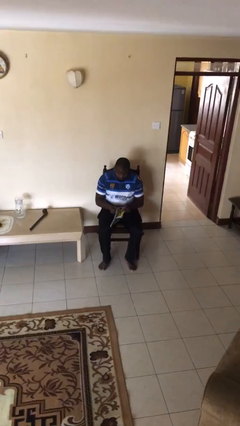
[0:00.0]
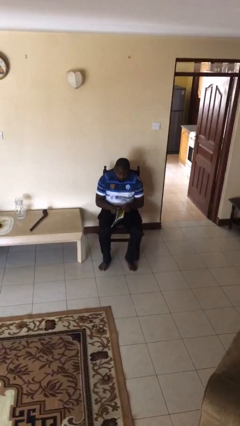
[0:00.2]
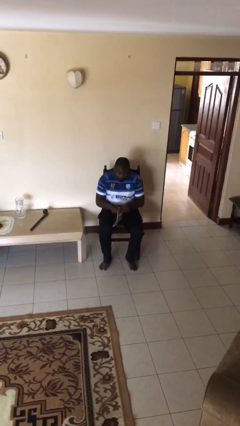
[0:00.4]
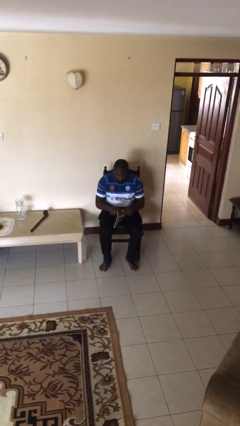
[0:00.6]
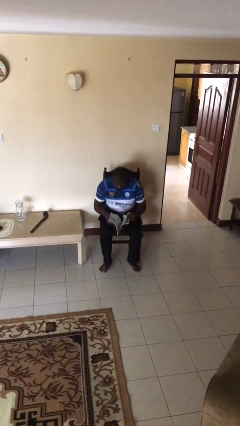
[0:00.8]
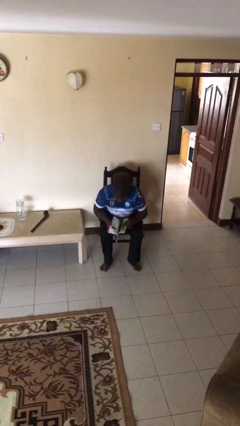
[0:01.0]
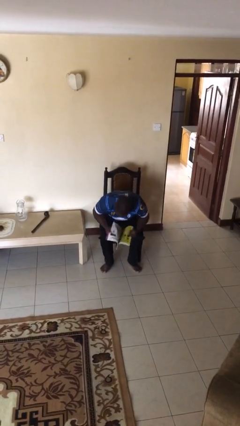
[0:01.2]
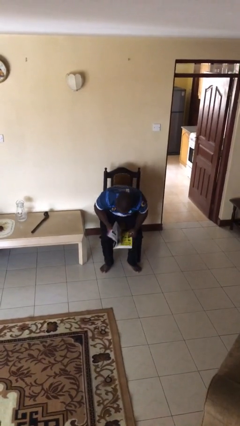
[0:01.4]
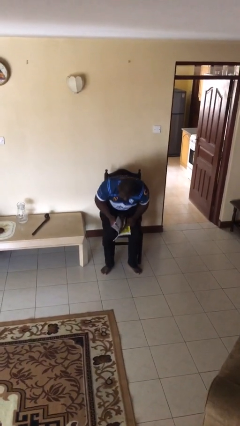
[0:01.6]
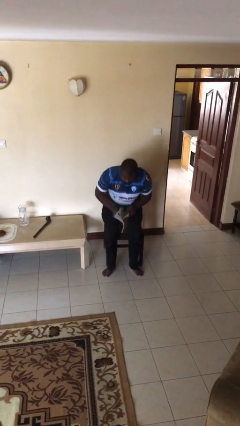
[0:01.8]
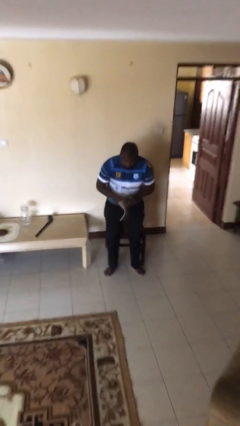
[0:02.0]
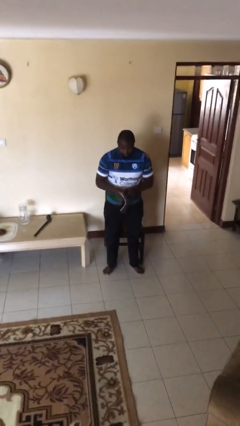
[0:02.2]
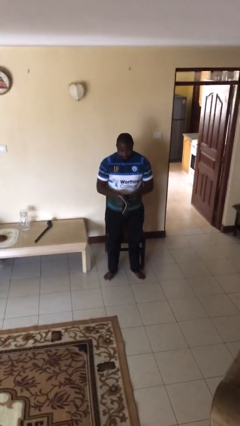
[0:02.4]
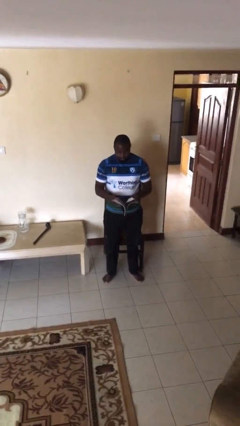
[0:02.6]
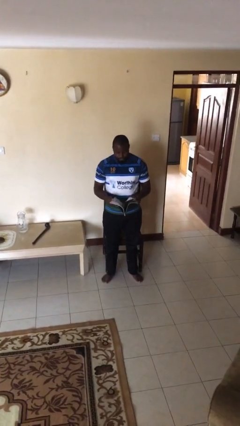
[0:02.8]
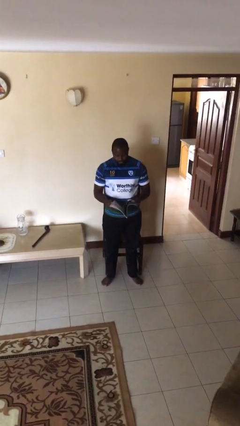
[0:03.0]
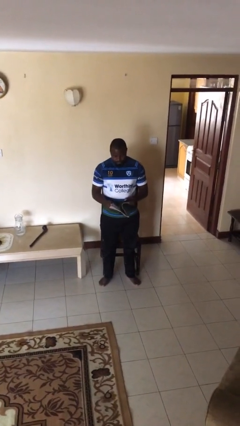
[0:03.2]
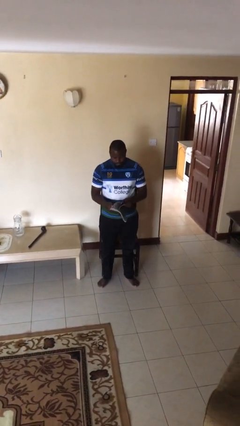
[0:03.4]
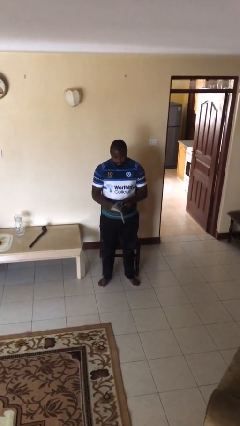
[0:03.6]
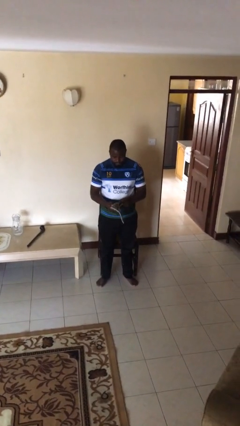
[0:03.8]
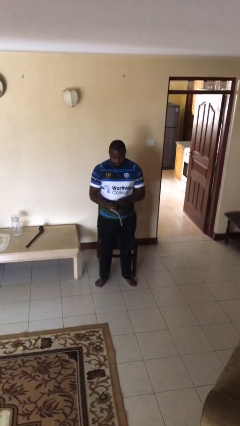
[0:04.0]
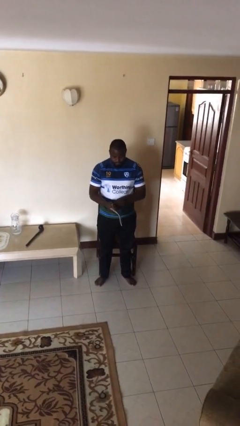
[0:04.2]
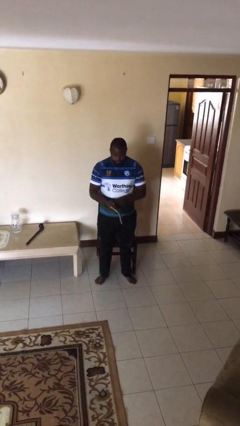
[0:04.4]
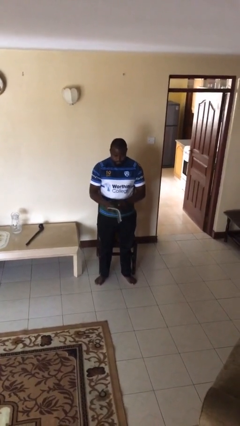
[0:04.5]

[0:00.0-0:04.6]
person stands up

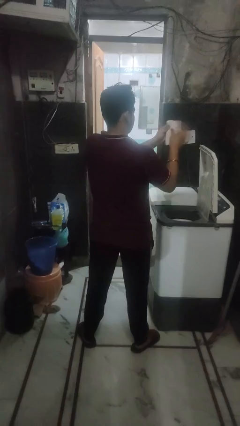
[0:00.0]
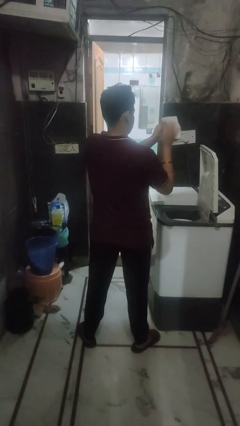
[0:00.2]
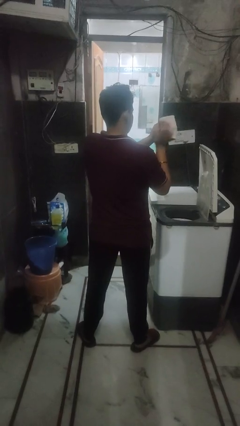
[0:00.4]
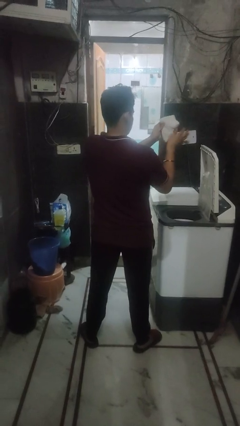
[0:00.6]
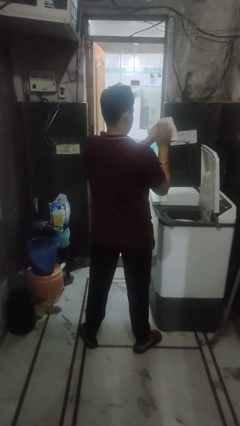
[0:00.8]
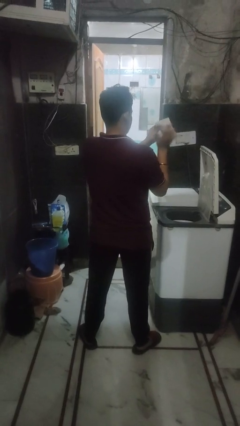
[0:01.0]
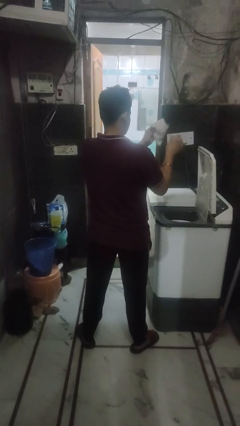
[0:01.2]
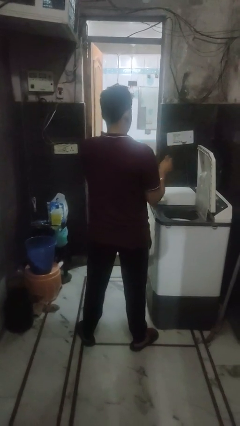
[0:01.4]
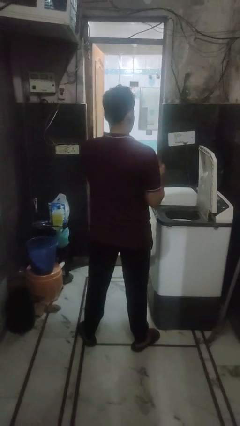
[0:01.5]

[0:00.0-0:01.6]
person cleans dryer lint trap

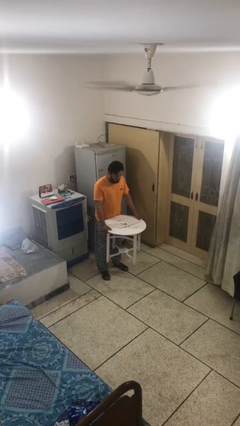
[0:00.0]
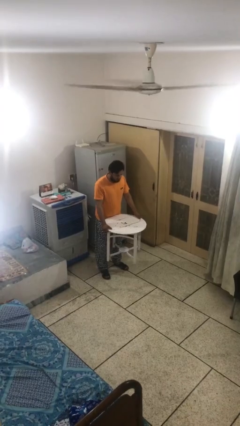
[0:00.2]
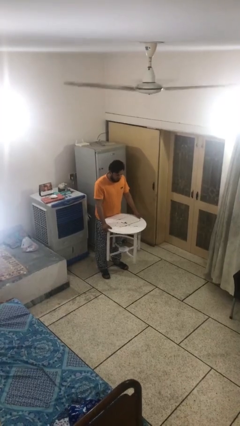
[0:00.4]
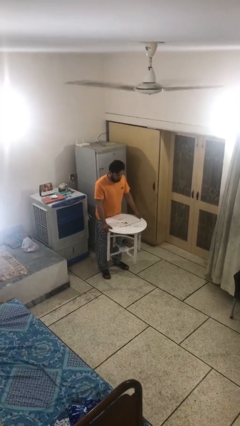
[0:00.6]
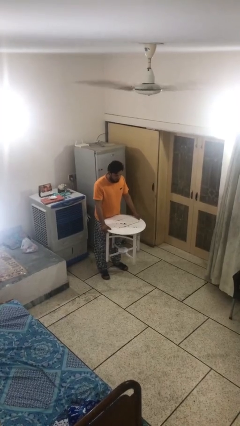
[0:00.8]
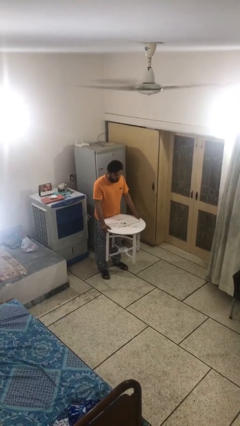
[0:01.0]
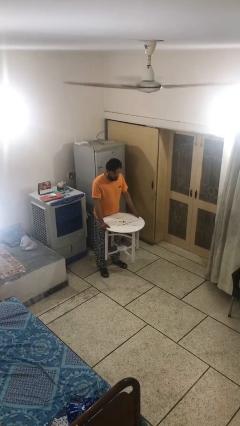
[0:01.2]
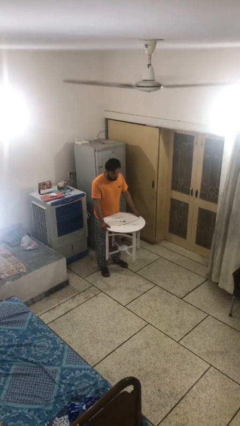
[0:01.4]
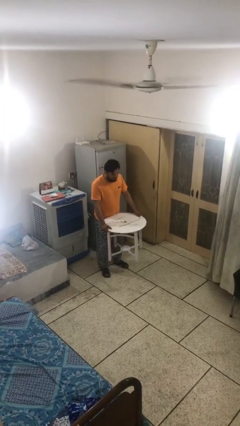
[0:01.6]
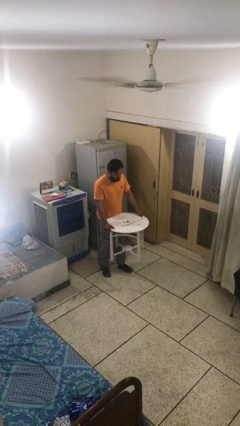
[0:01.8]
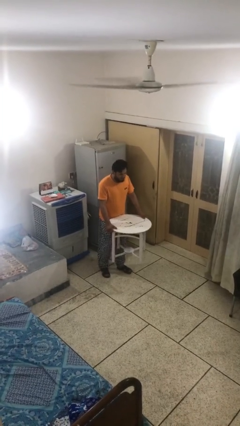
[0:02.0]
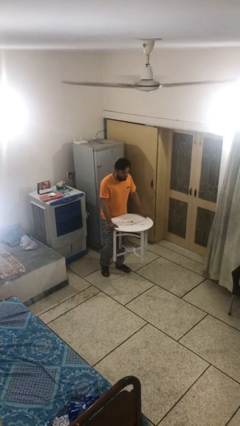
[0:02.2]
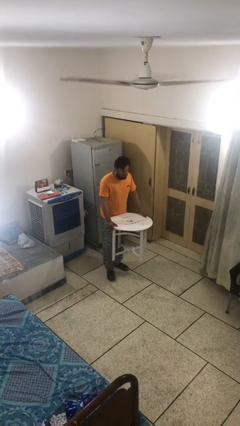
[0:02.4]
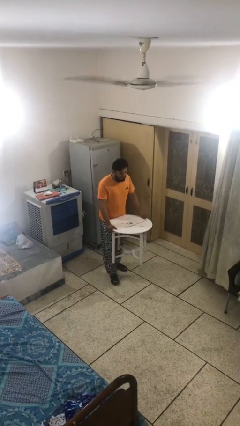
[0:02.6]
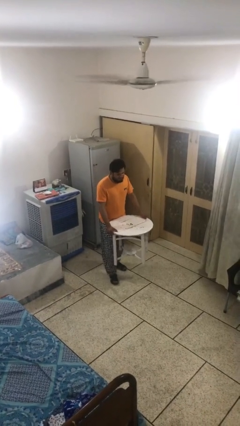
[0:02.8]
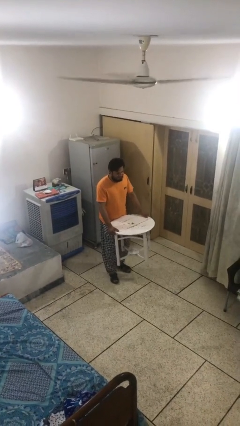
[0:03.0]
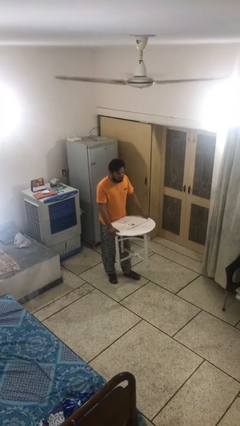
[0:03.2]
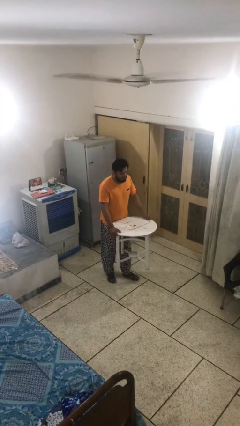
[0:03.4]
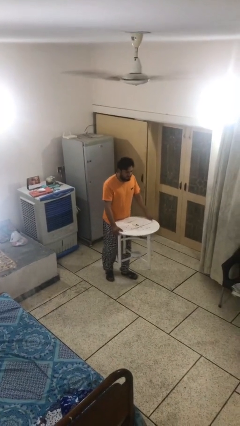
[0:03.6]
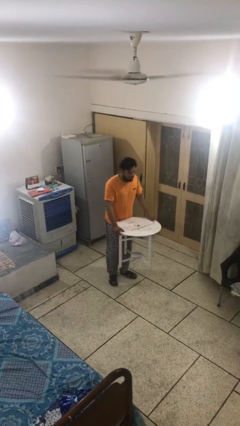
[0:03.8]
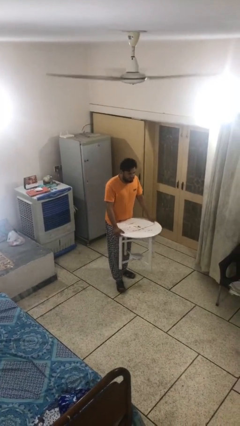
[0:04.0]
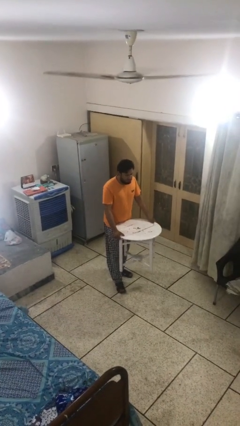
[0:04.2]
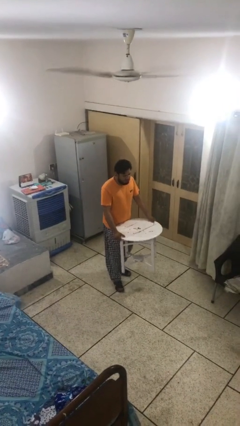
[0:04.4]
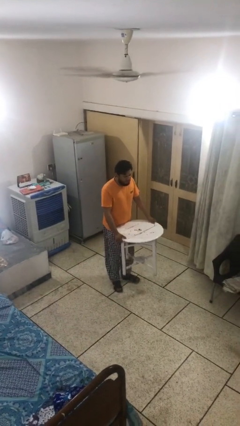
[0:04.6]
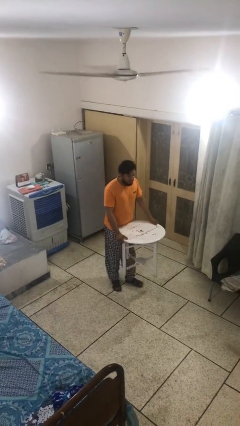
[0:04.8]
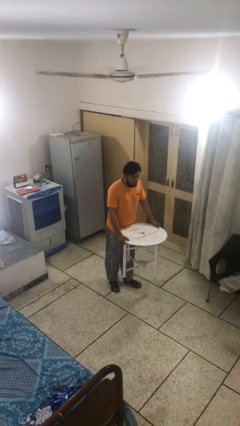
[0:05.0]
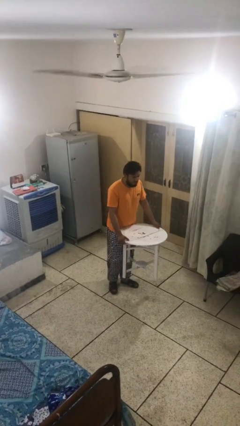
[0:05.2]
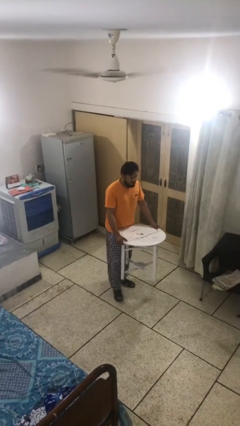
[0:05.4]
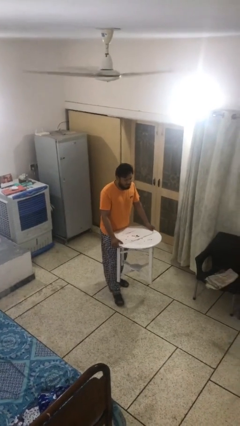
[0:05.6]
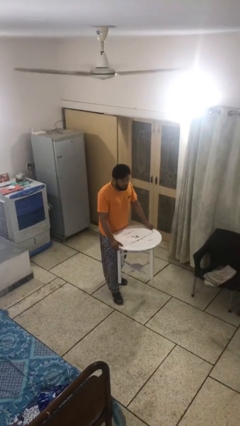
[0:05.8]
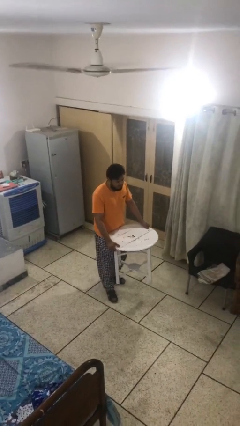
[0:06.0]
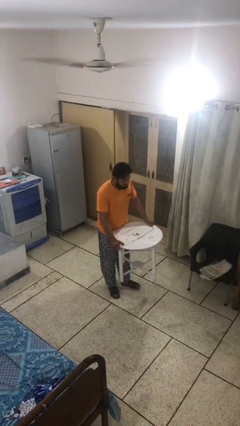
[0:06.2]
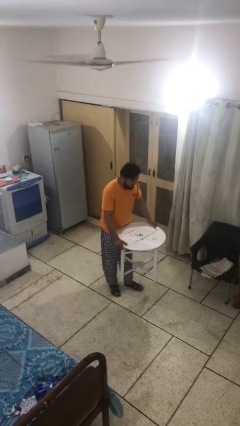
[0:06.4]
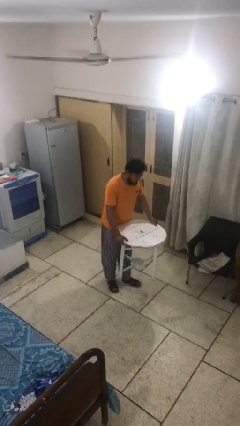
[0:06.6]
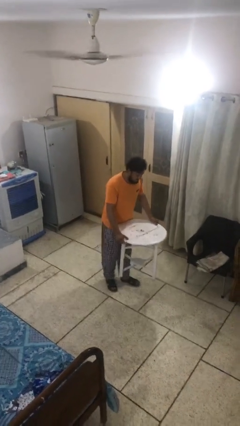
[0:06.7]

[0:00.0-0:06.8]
person carries heavy object

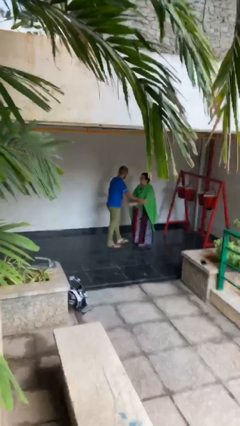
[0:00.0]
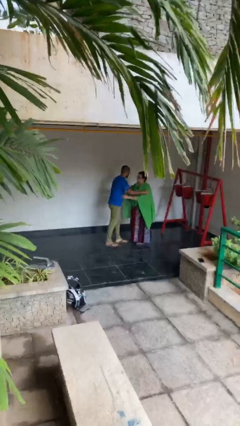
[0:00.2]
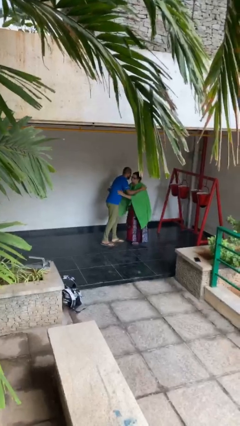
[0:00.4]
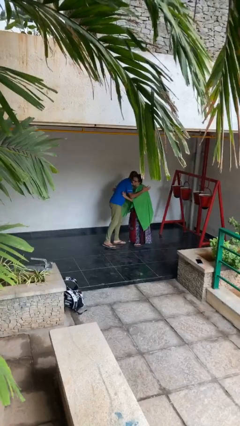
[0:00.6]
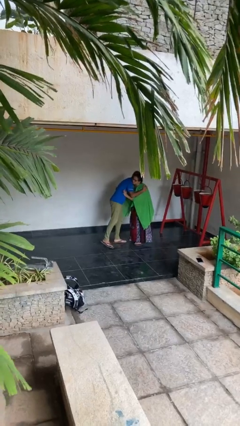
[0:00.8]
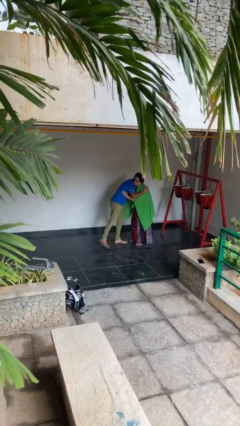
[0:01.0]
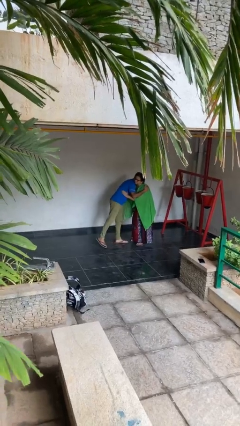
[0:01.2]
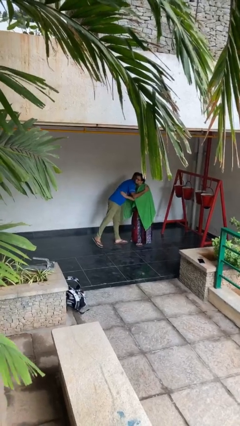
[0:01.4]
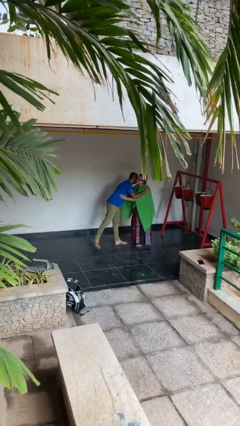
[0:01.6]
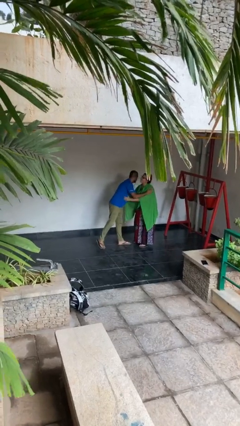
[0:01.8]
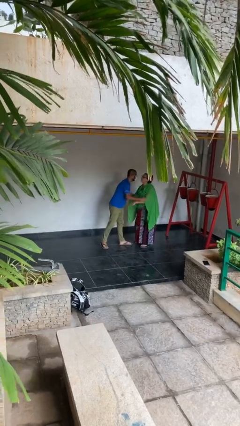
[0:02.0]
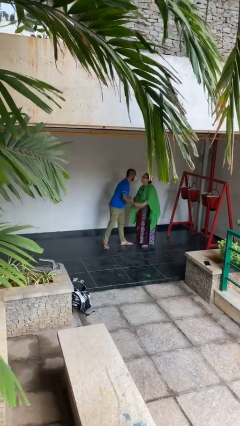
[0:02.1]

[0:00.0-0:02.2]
person embraces person

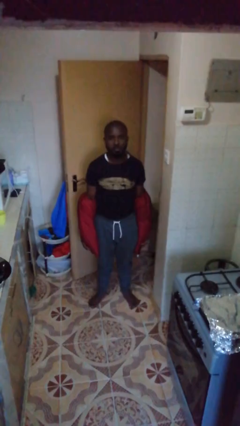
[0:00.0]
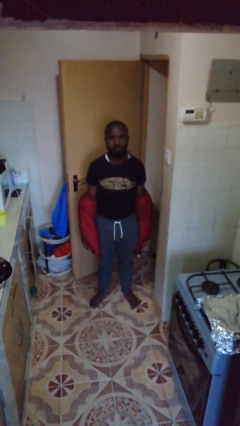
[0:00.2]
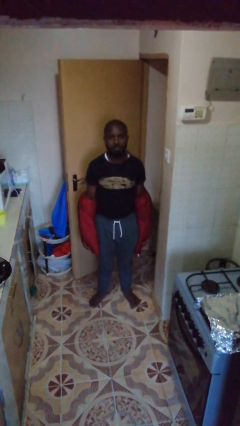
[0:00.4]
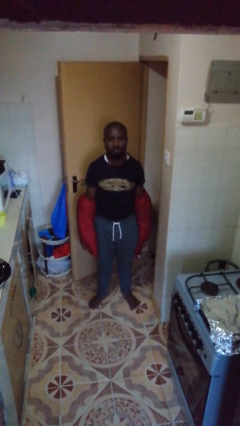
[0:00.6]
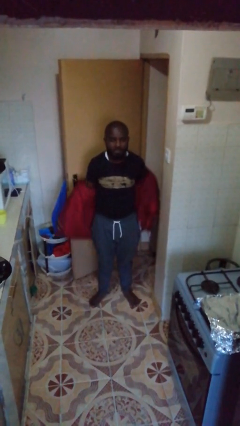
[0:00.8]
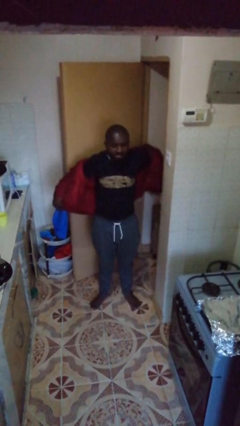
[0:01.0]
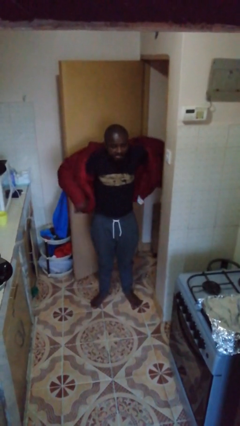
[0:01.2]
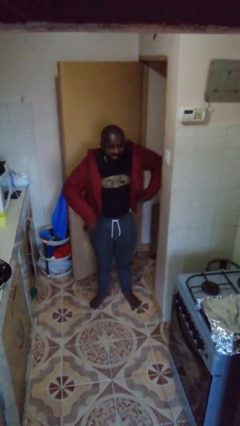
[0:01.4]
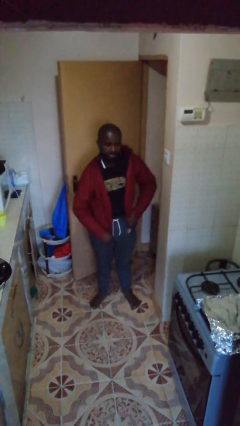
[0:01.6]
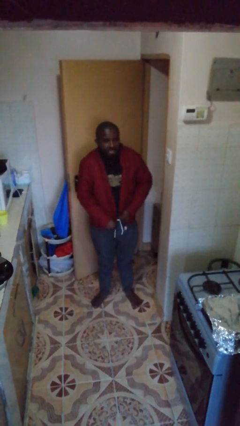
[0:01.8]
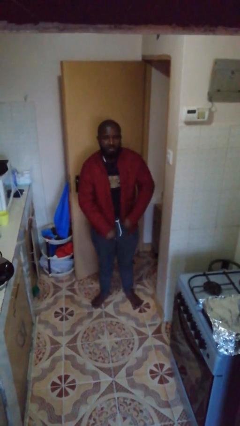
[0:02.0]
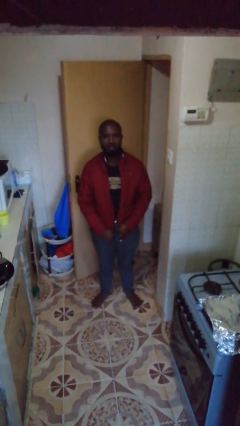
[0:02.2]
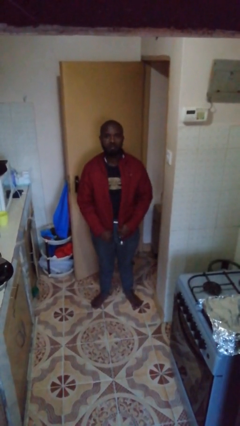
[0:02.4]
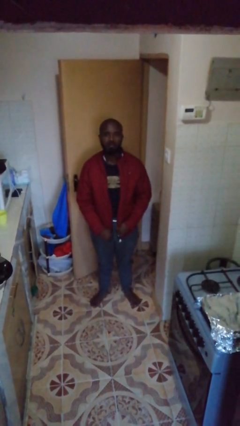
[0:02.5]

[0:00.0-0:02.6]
person puts on jacket
